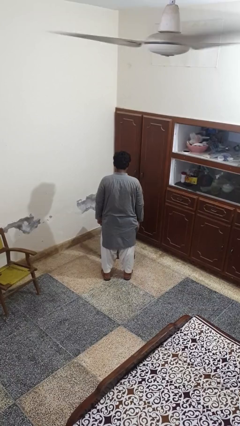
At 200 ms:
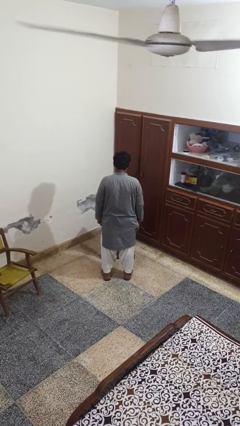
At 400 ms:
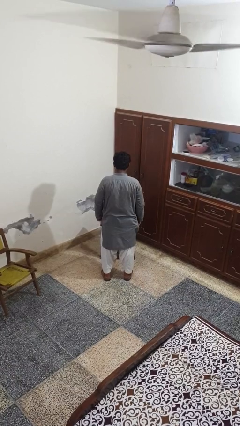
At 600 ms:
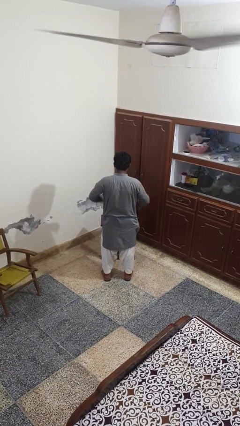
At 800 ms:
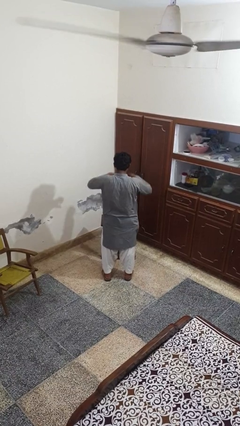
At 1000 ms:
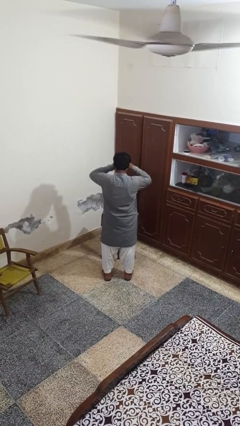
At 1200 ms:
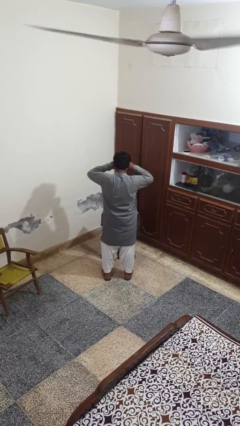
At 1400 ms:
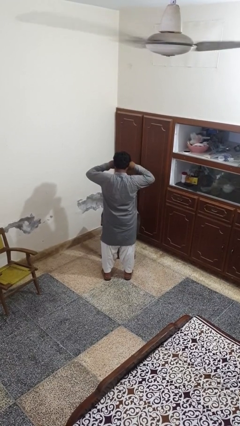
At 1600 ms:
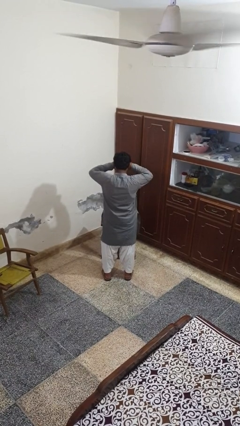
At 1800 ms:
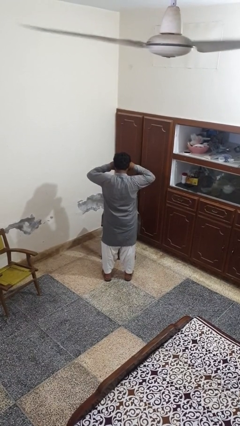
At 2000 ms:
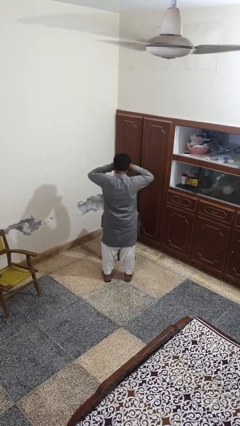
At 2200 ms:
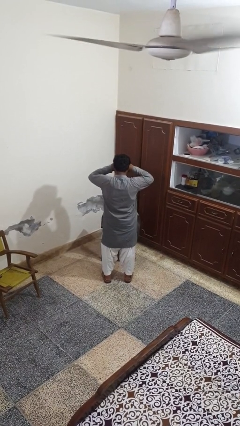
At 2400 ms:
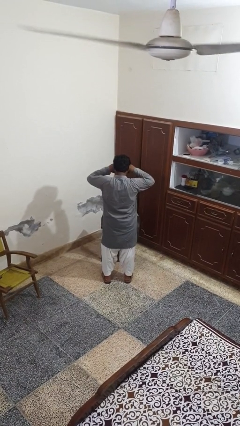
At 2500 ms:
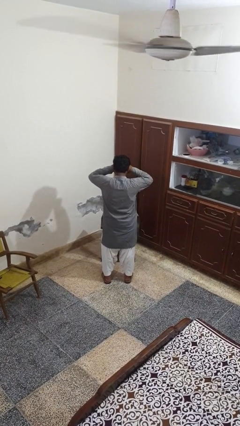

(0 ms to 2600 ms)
person rubs eyes

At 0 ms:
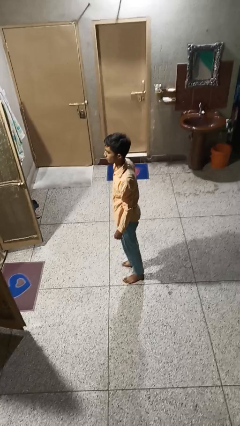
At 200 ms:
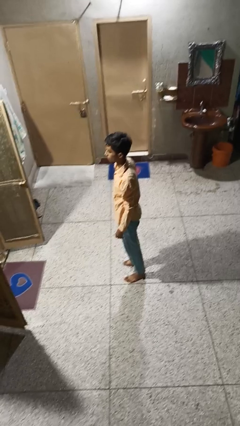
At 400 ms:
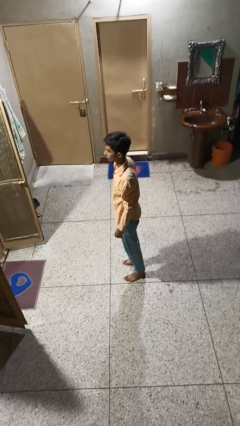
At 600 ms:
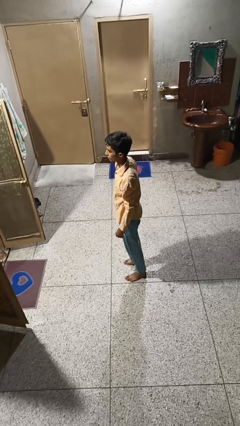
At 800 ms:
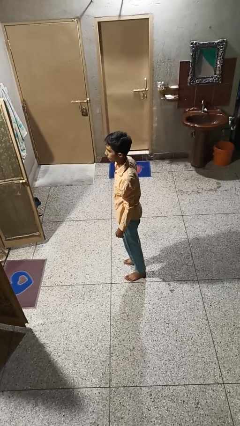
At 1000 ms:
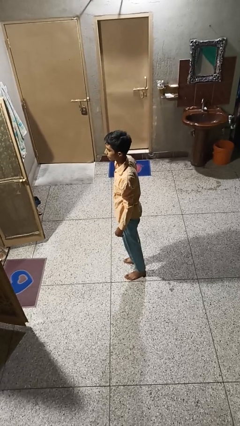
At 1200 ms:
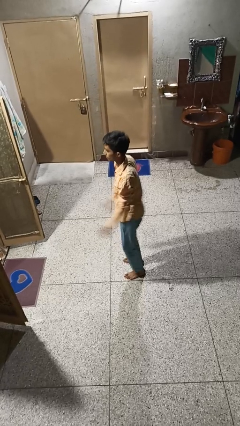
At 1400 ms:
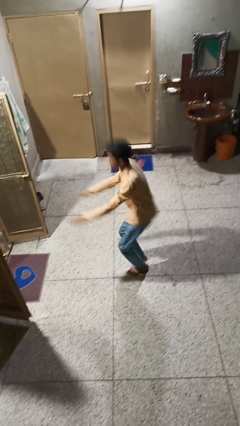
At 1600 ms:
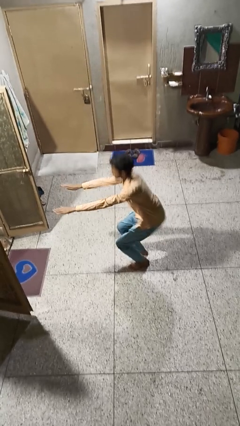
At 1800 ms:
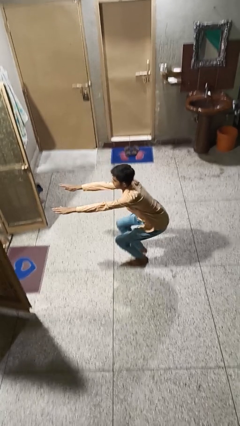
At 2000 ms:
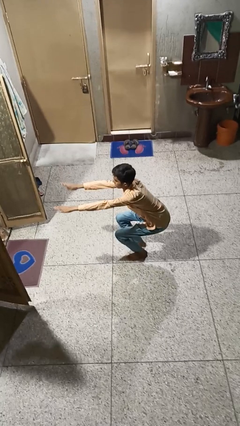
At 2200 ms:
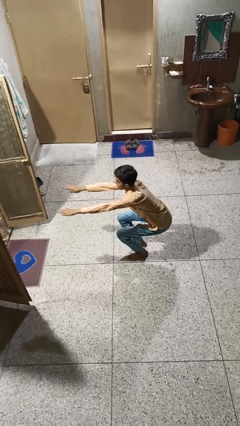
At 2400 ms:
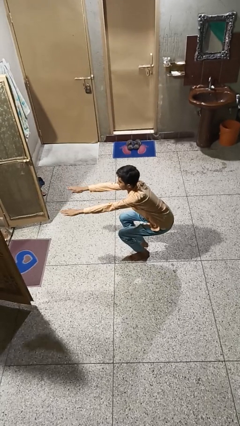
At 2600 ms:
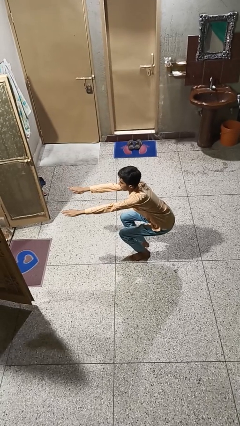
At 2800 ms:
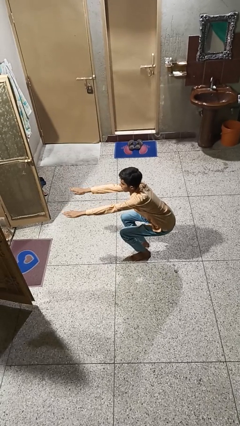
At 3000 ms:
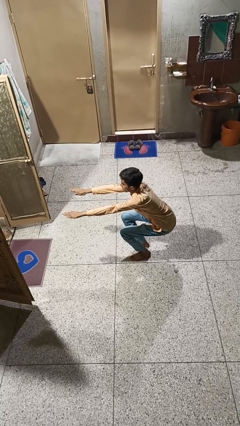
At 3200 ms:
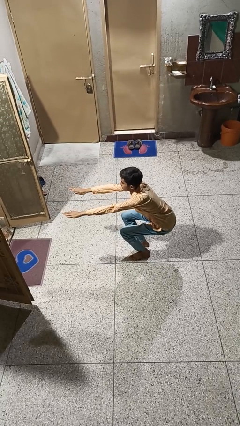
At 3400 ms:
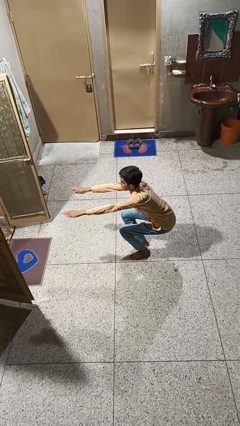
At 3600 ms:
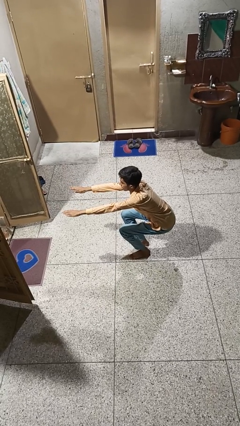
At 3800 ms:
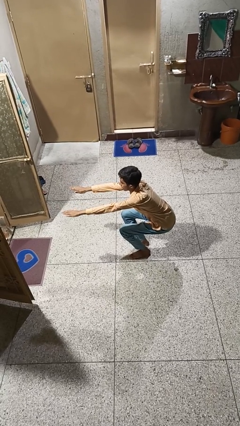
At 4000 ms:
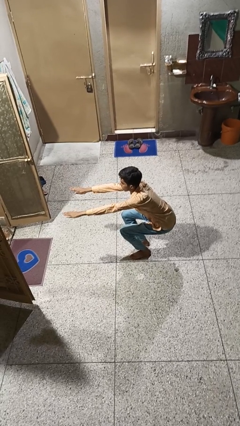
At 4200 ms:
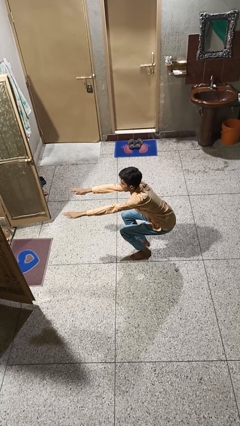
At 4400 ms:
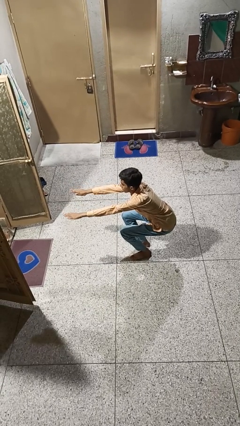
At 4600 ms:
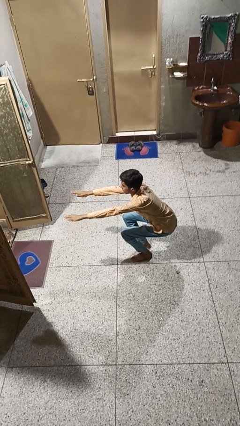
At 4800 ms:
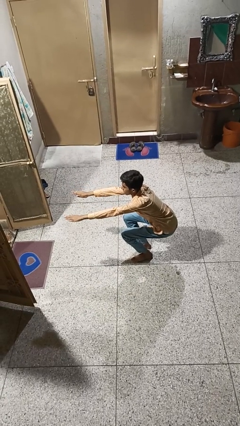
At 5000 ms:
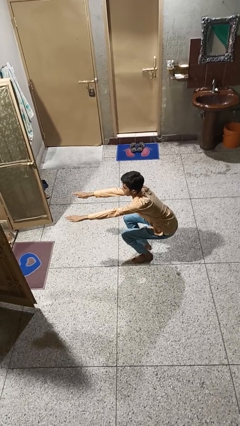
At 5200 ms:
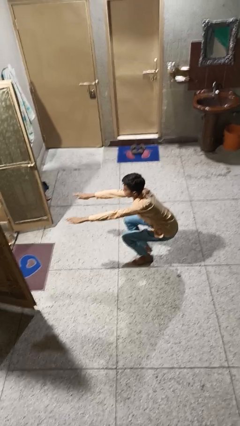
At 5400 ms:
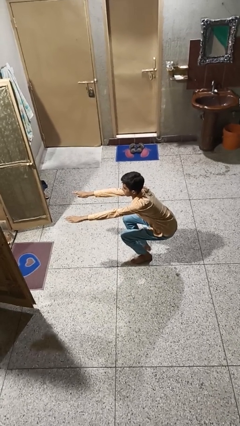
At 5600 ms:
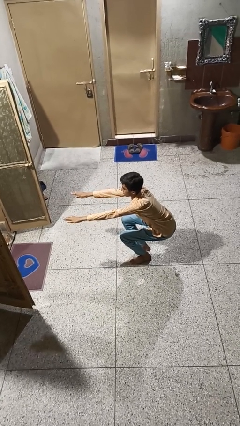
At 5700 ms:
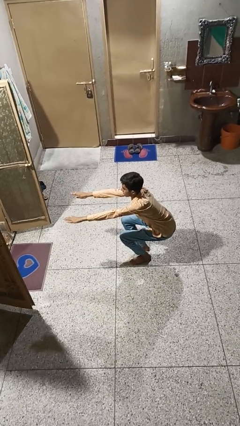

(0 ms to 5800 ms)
person squats

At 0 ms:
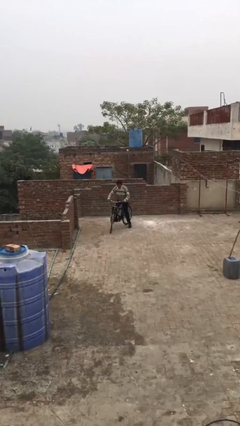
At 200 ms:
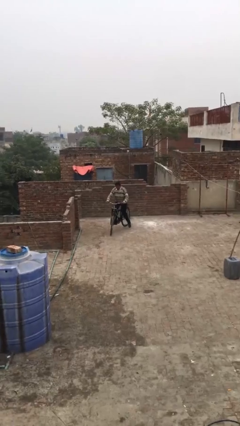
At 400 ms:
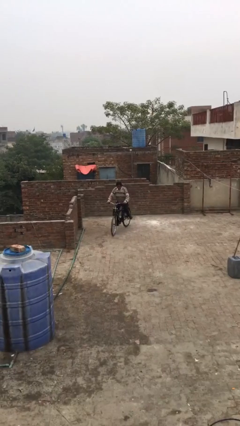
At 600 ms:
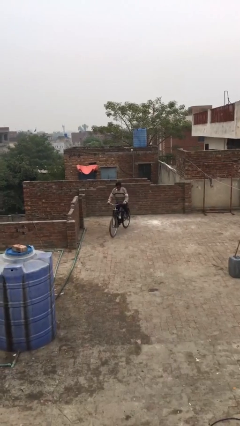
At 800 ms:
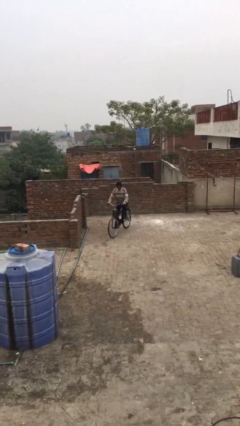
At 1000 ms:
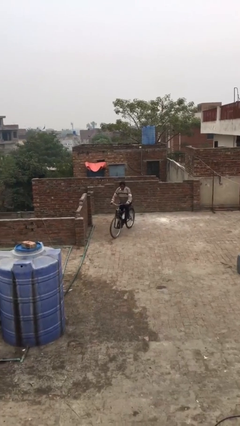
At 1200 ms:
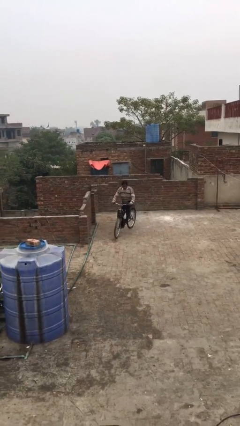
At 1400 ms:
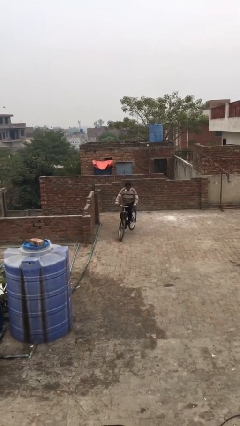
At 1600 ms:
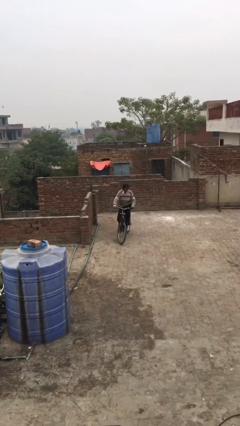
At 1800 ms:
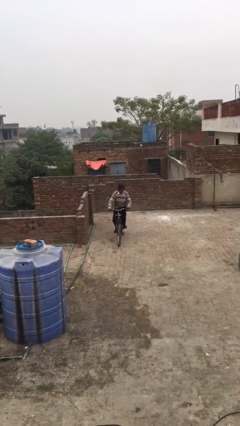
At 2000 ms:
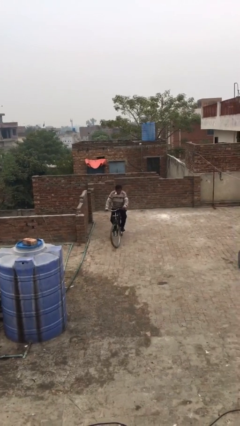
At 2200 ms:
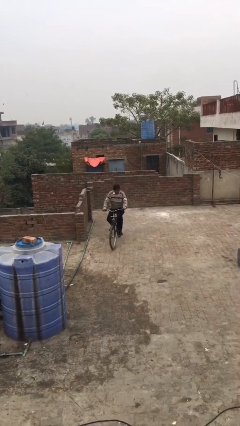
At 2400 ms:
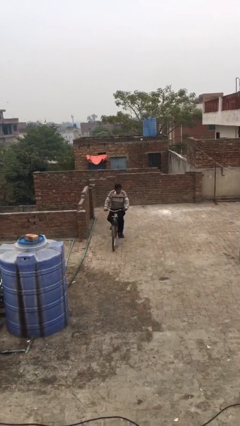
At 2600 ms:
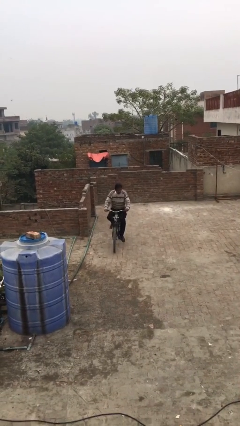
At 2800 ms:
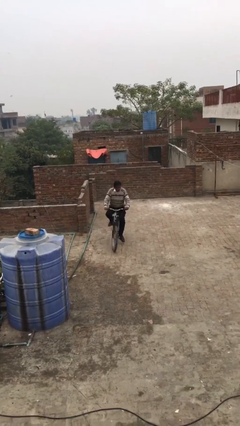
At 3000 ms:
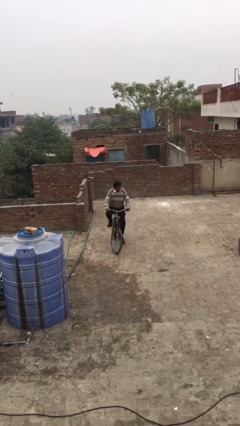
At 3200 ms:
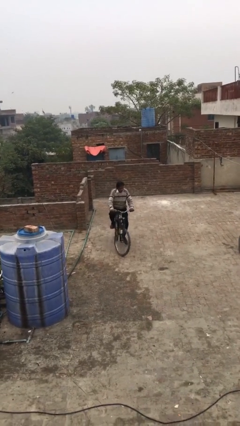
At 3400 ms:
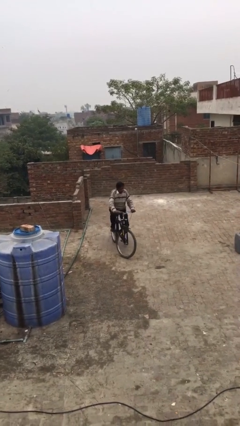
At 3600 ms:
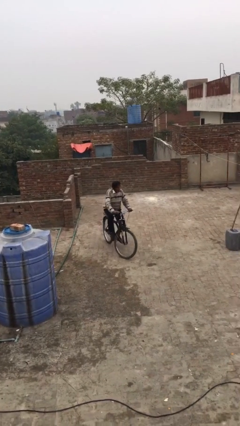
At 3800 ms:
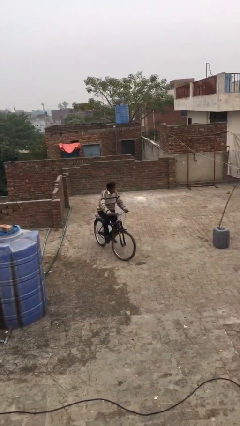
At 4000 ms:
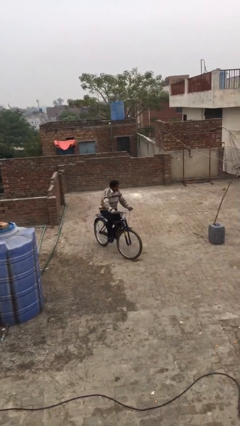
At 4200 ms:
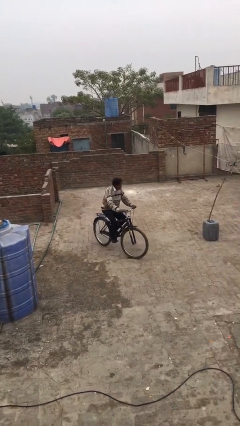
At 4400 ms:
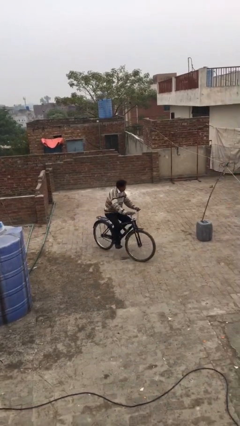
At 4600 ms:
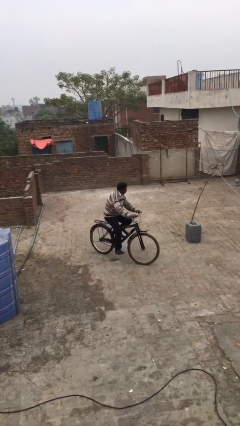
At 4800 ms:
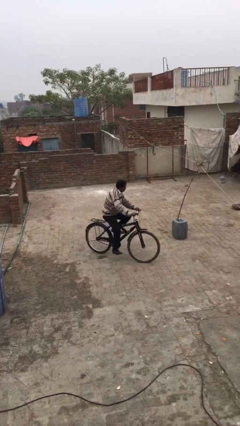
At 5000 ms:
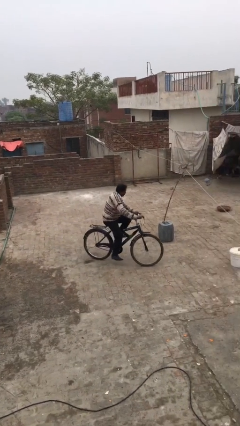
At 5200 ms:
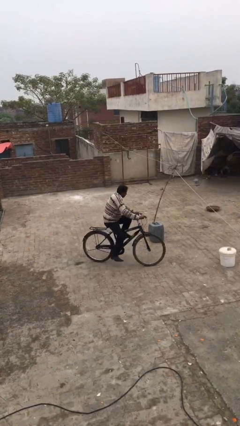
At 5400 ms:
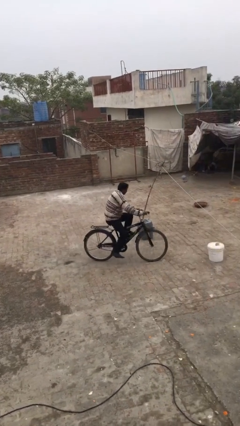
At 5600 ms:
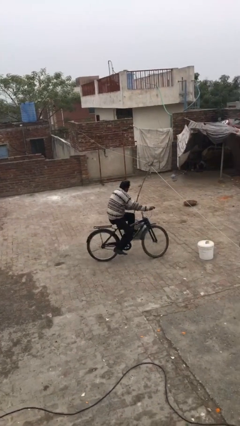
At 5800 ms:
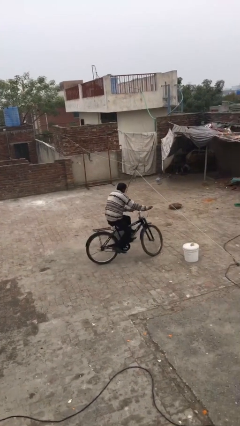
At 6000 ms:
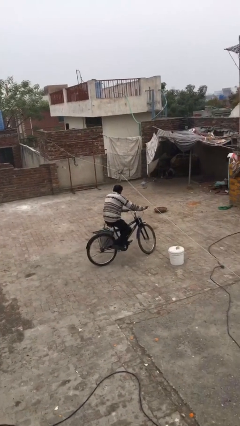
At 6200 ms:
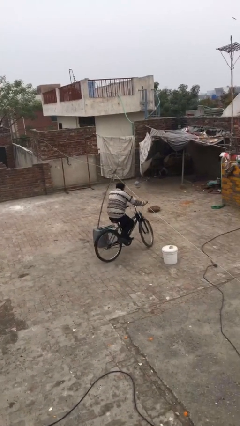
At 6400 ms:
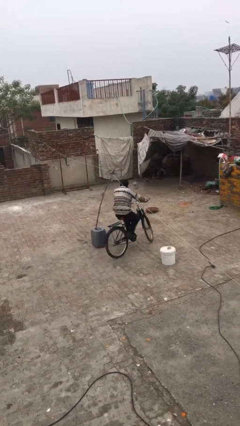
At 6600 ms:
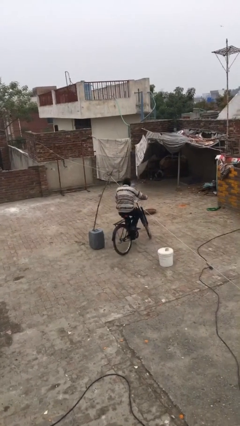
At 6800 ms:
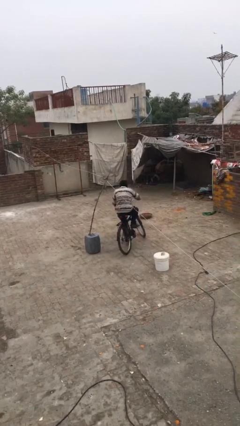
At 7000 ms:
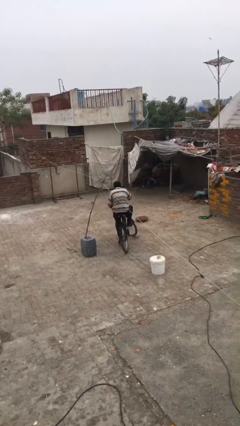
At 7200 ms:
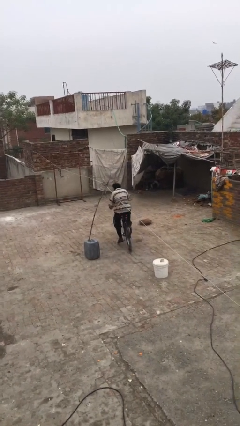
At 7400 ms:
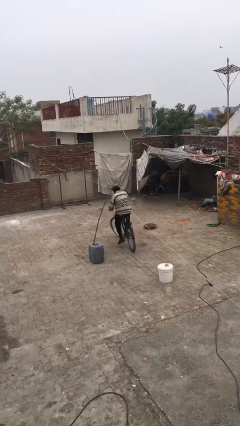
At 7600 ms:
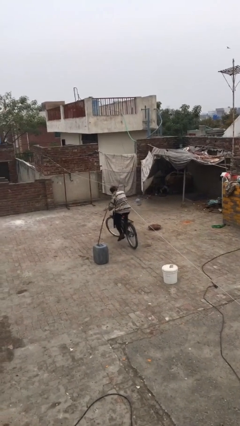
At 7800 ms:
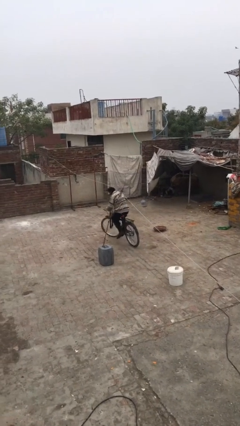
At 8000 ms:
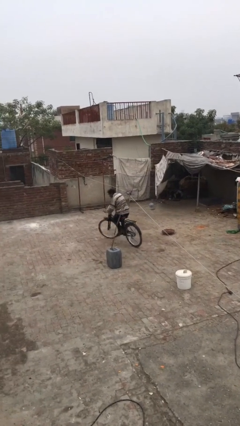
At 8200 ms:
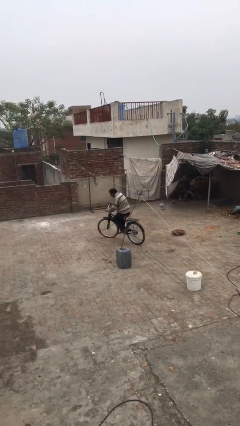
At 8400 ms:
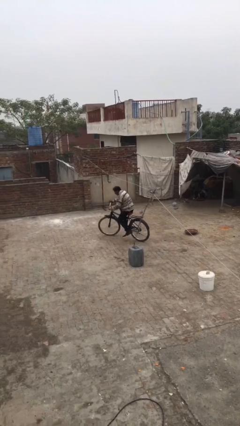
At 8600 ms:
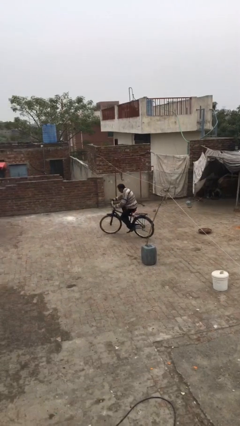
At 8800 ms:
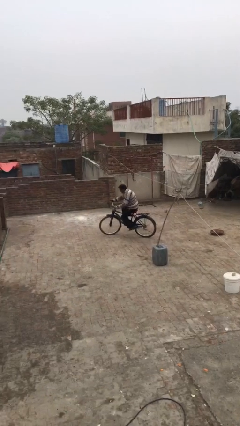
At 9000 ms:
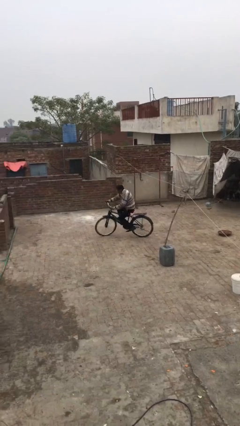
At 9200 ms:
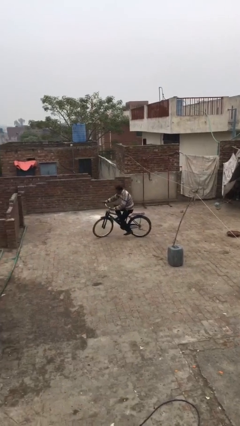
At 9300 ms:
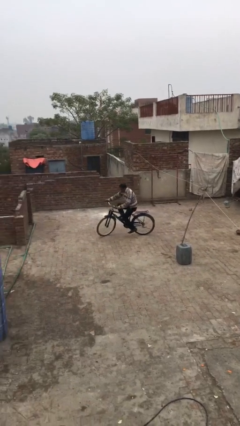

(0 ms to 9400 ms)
person rides bicycle

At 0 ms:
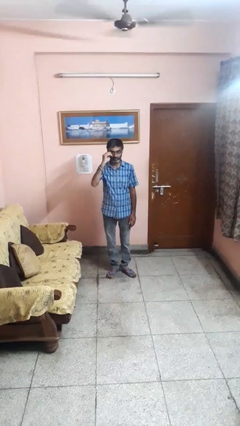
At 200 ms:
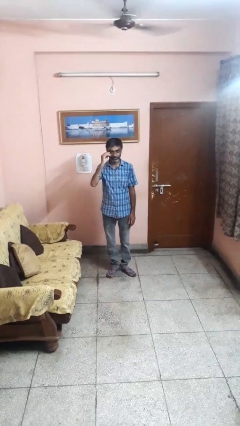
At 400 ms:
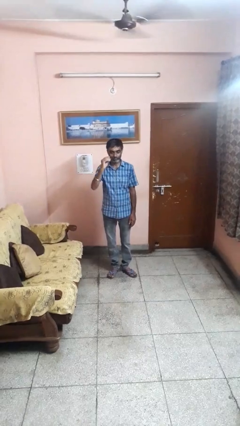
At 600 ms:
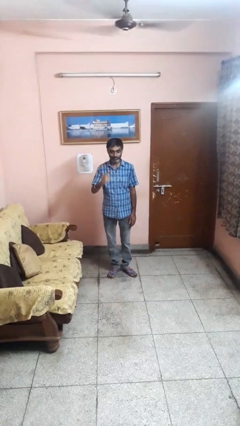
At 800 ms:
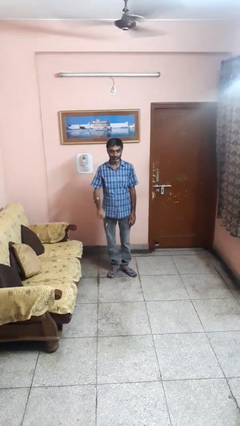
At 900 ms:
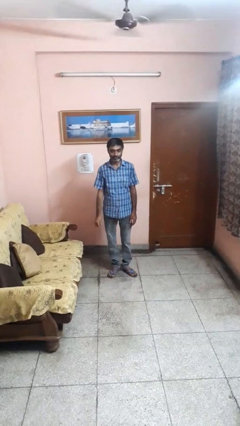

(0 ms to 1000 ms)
person takes off glasses
